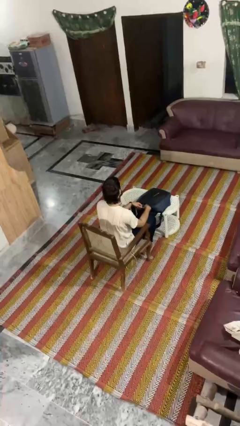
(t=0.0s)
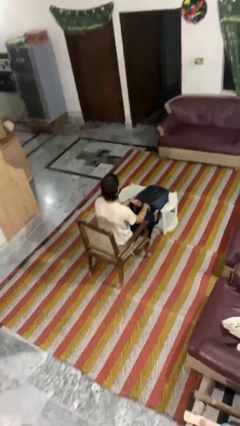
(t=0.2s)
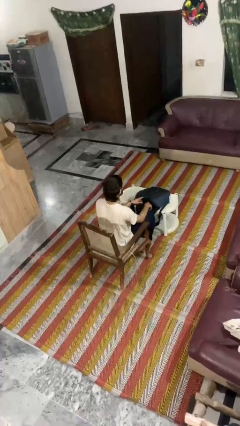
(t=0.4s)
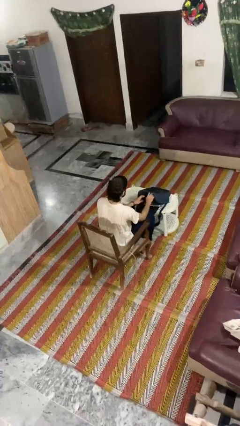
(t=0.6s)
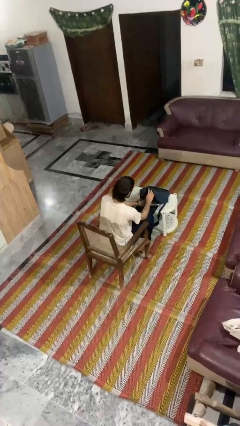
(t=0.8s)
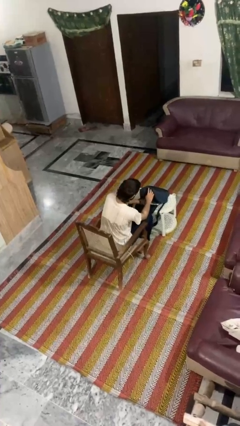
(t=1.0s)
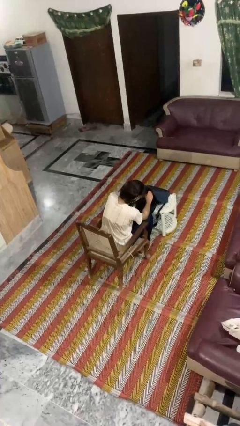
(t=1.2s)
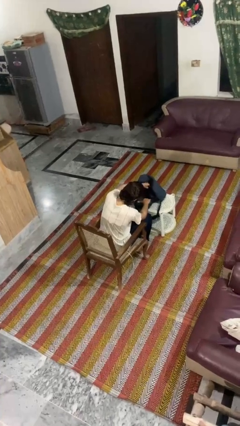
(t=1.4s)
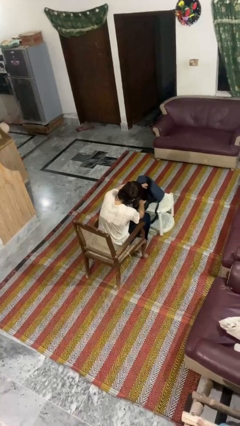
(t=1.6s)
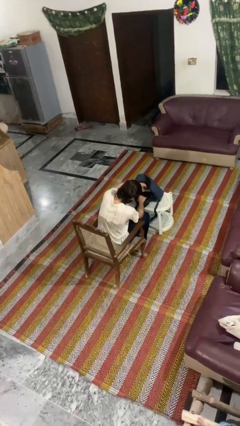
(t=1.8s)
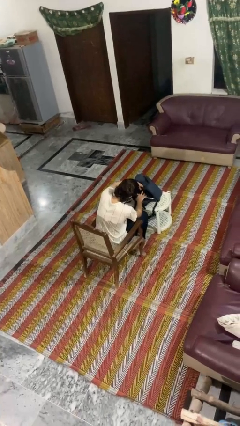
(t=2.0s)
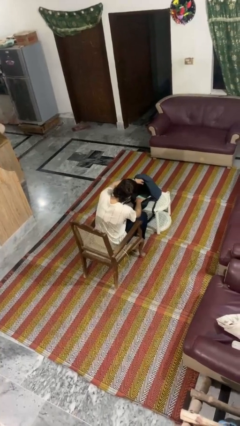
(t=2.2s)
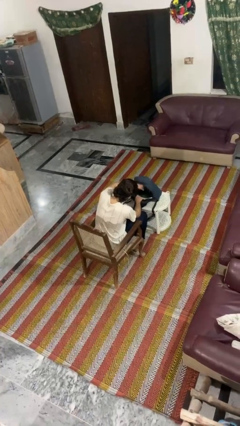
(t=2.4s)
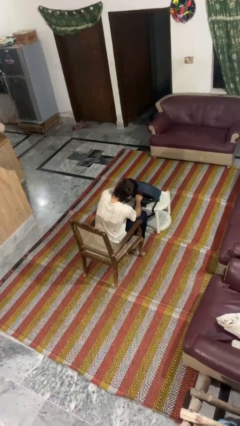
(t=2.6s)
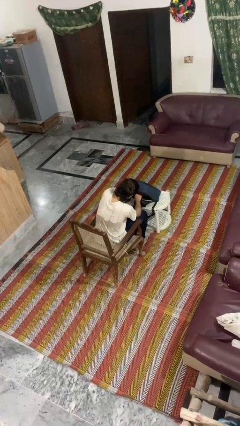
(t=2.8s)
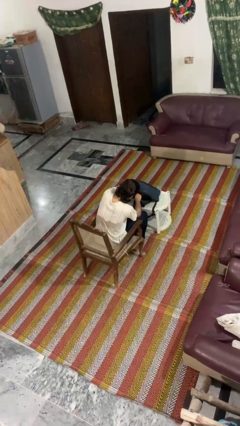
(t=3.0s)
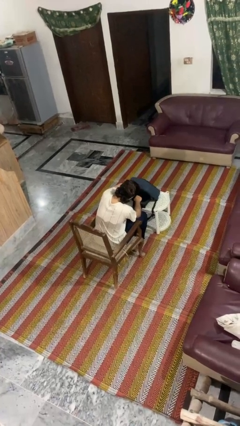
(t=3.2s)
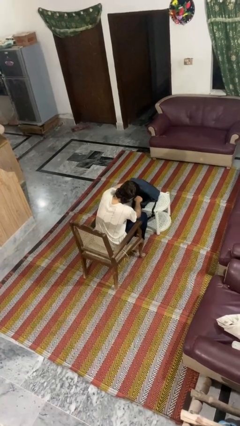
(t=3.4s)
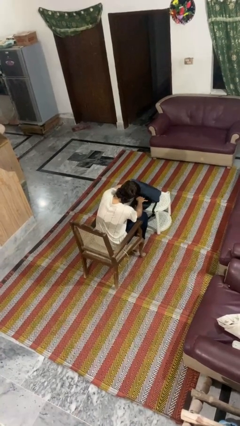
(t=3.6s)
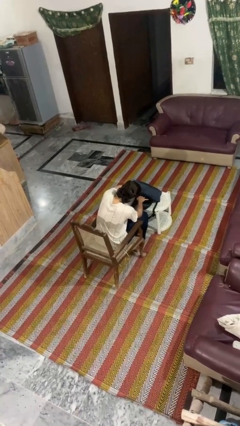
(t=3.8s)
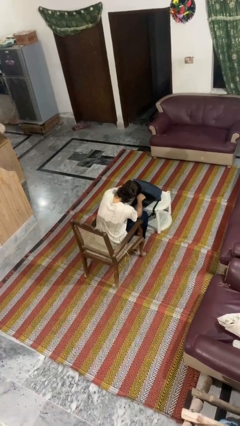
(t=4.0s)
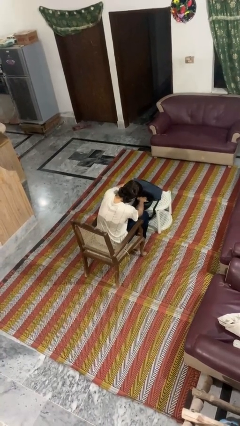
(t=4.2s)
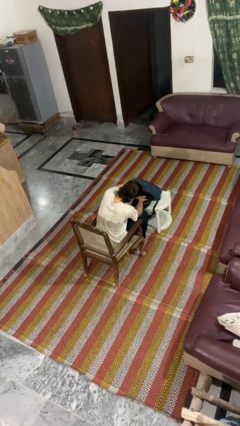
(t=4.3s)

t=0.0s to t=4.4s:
person searches in backpack

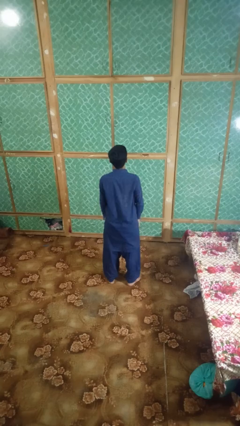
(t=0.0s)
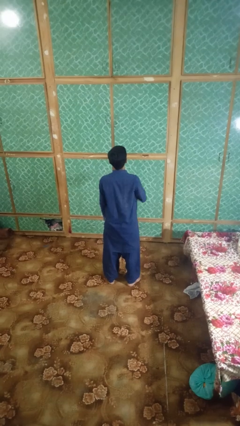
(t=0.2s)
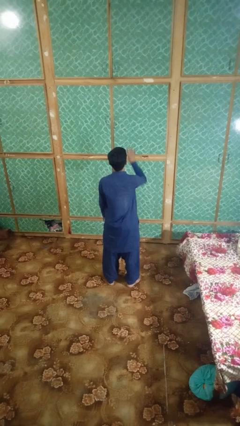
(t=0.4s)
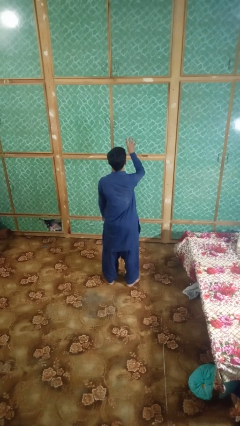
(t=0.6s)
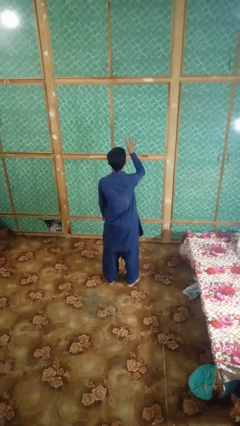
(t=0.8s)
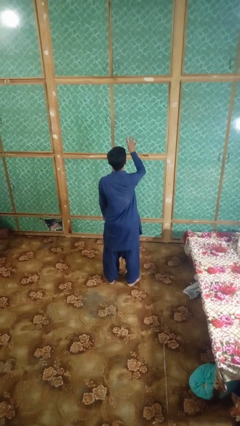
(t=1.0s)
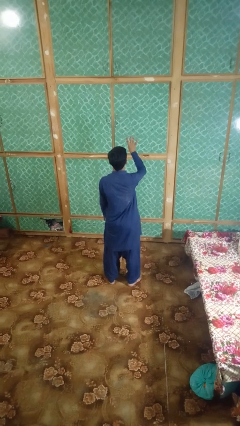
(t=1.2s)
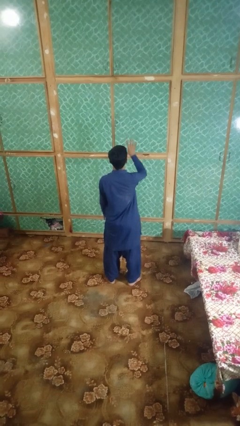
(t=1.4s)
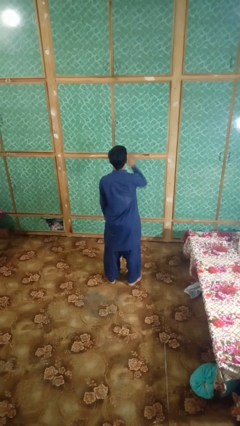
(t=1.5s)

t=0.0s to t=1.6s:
person gestures number four

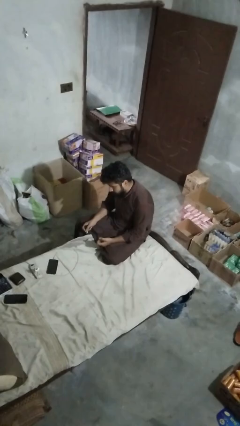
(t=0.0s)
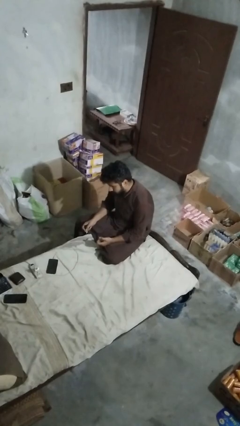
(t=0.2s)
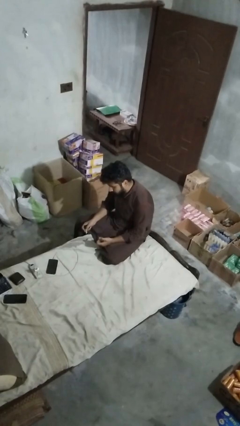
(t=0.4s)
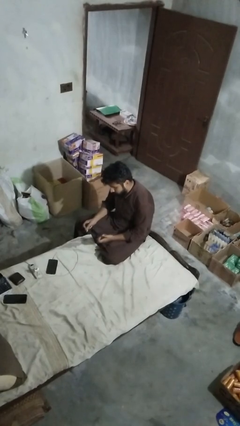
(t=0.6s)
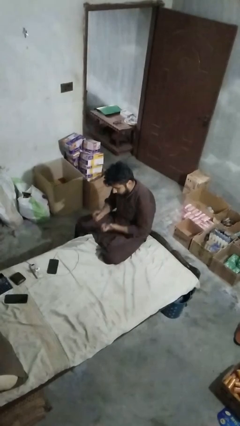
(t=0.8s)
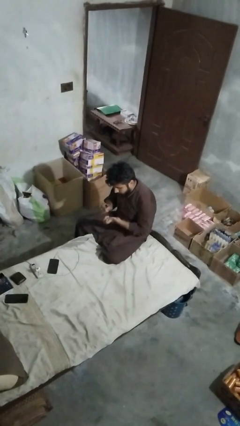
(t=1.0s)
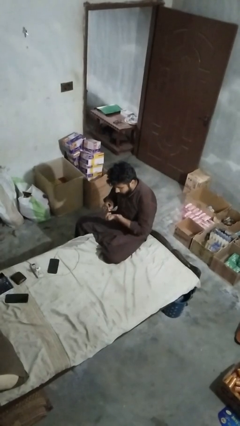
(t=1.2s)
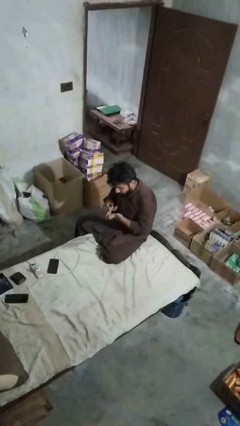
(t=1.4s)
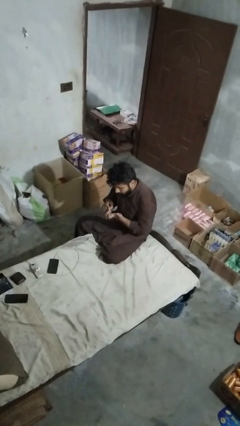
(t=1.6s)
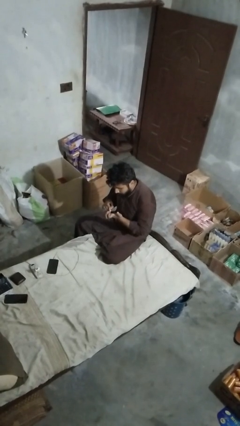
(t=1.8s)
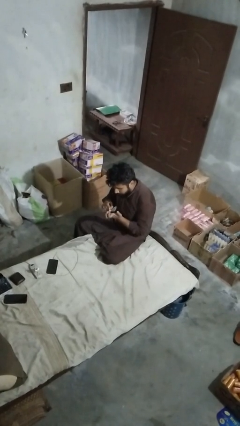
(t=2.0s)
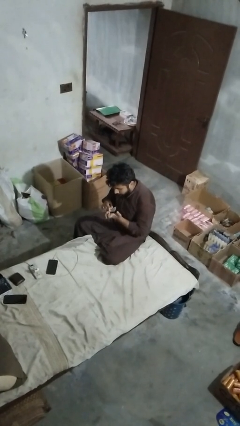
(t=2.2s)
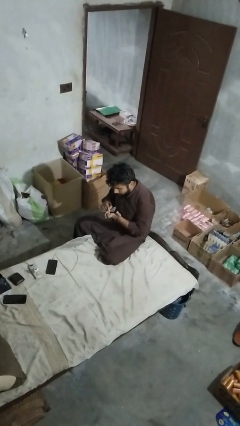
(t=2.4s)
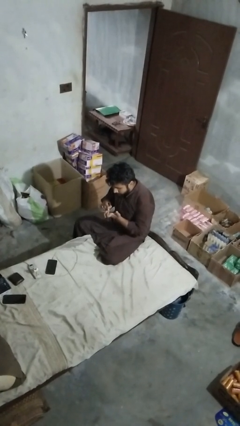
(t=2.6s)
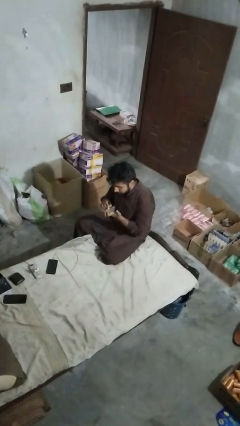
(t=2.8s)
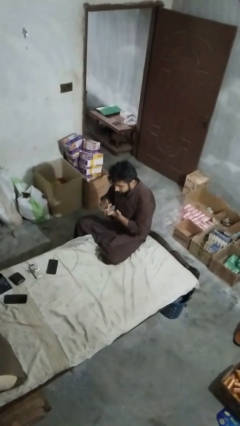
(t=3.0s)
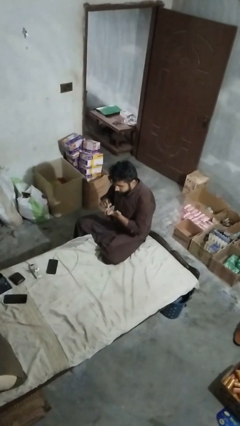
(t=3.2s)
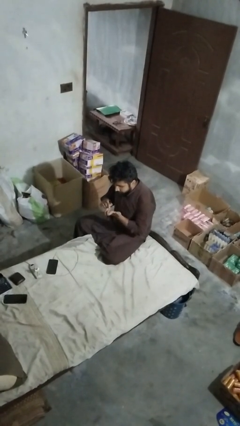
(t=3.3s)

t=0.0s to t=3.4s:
person paints fingernails

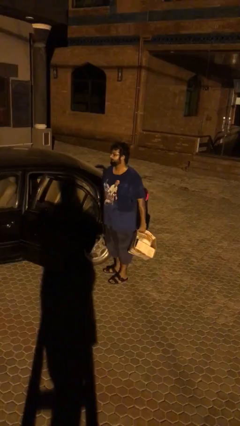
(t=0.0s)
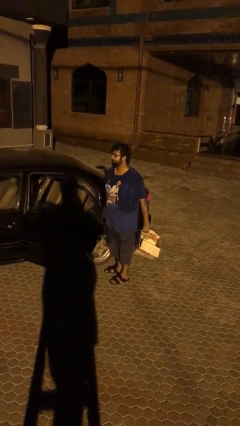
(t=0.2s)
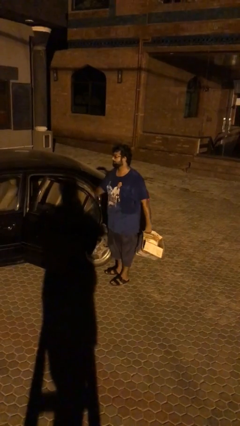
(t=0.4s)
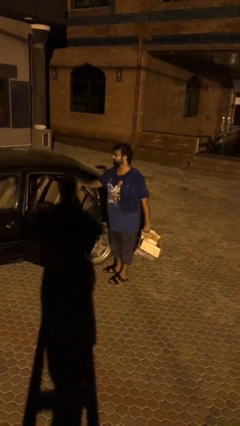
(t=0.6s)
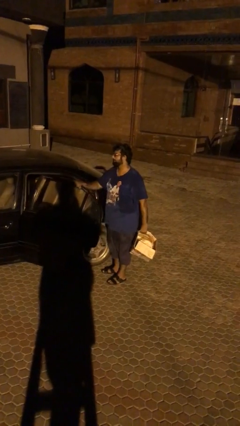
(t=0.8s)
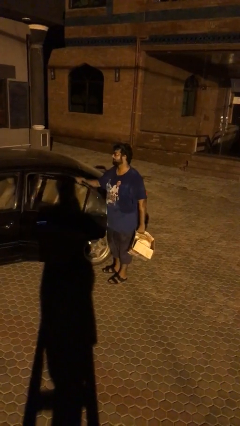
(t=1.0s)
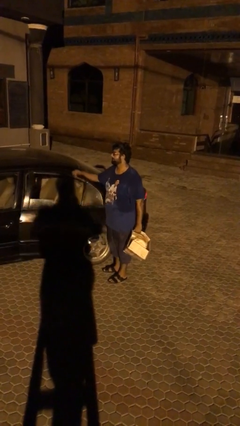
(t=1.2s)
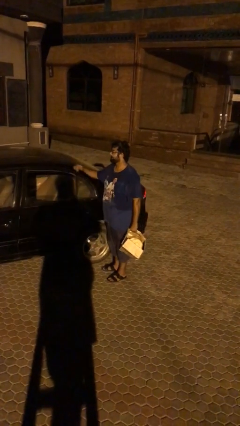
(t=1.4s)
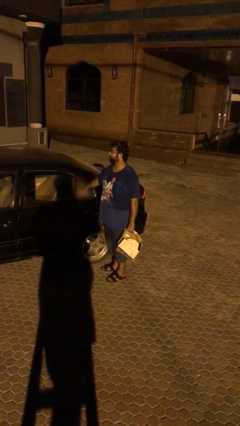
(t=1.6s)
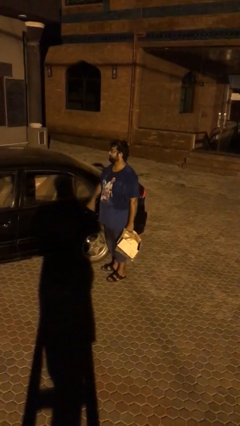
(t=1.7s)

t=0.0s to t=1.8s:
person closes car door

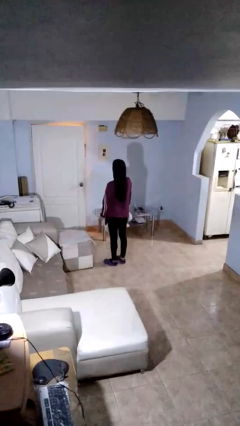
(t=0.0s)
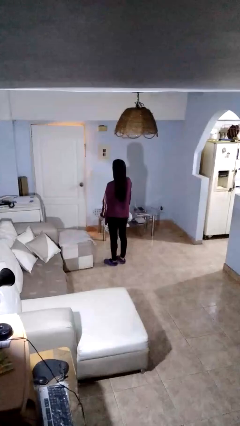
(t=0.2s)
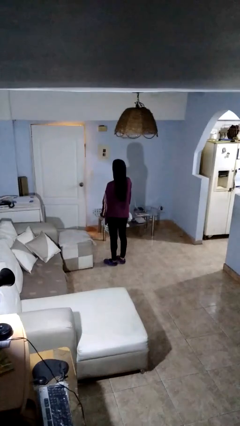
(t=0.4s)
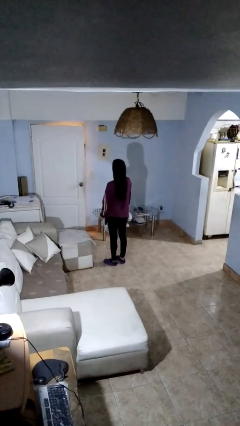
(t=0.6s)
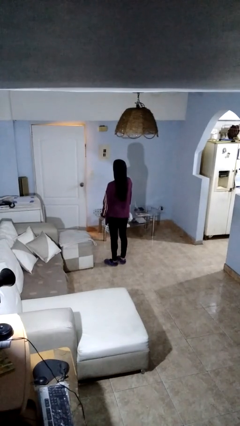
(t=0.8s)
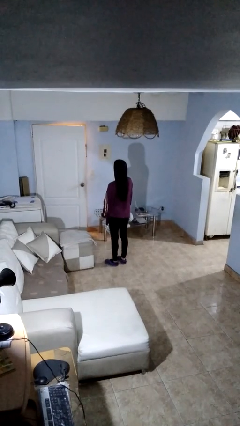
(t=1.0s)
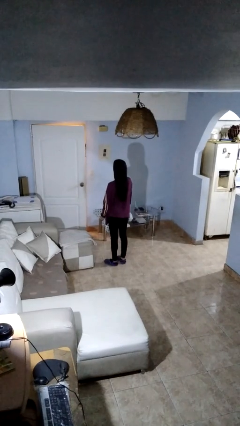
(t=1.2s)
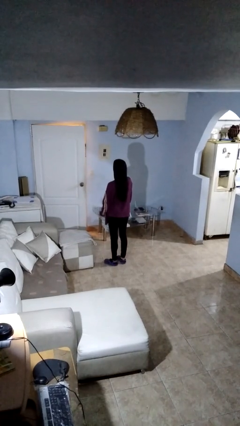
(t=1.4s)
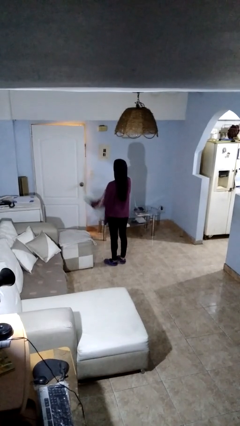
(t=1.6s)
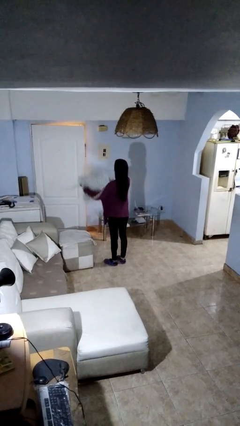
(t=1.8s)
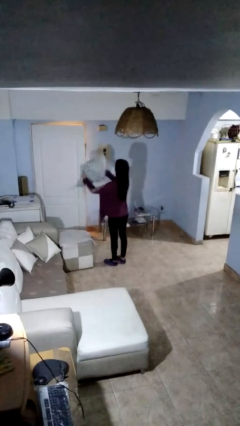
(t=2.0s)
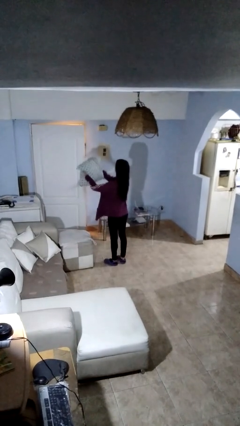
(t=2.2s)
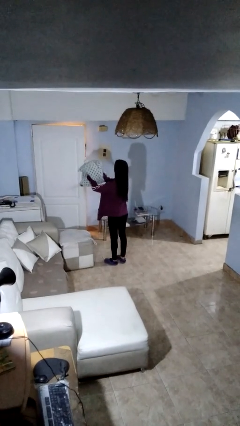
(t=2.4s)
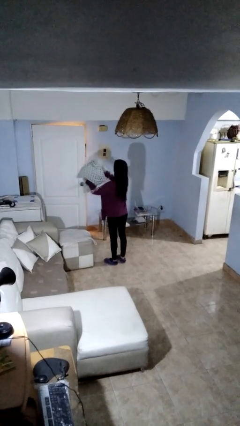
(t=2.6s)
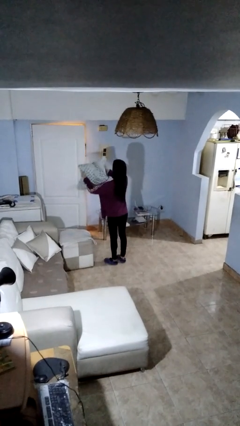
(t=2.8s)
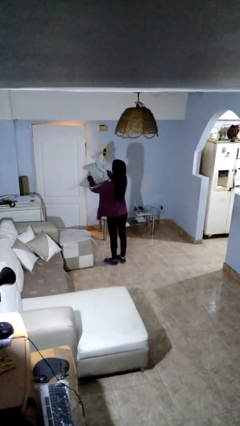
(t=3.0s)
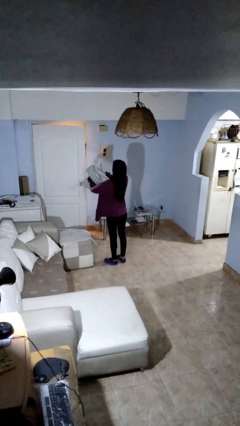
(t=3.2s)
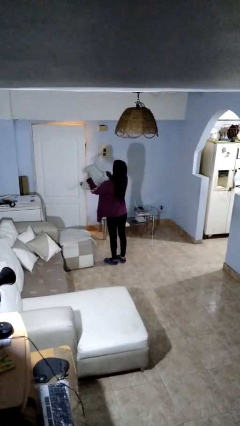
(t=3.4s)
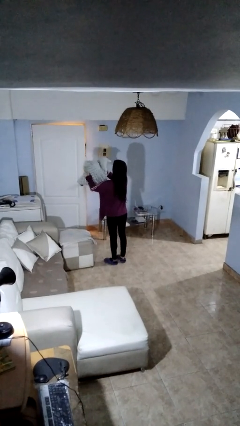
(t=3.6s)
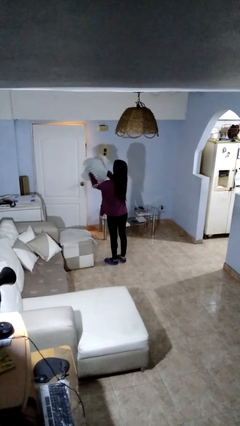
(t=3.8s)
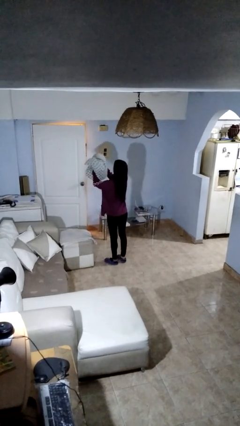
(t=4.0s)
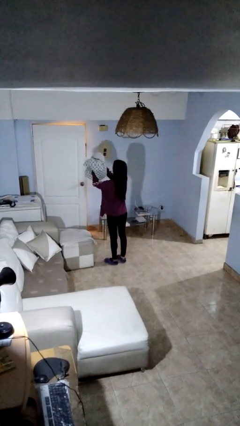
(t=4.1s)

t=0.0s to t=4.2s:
person squeezes object

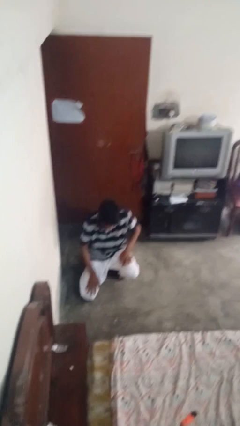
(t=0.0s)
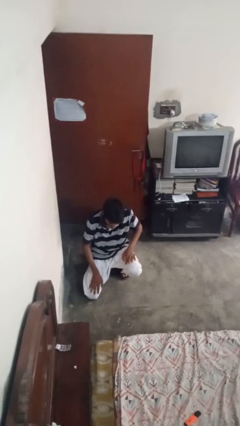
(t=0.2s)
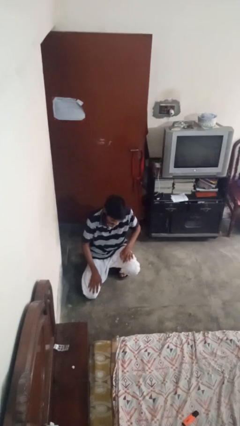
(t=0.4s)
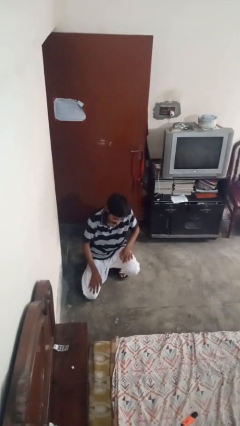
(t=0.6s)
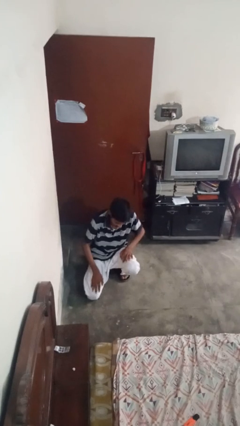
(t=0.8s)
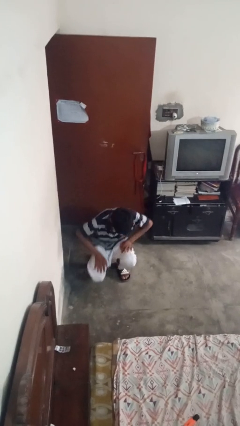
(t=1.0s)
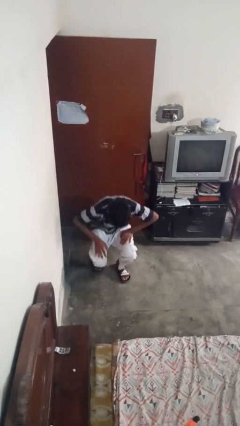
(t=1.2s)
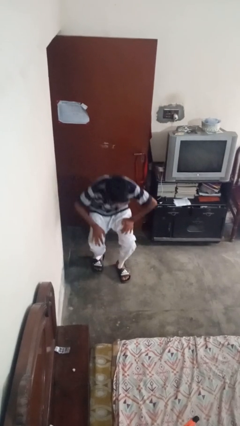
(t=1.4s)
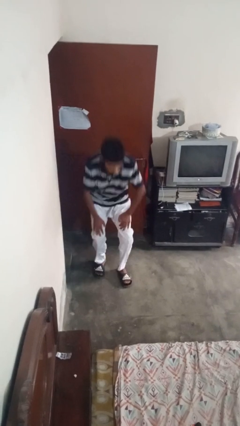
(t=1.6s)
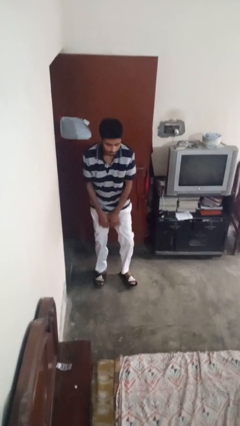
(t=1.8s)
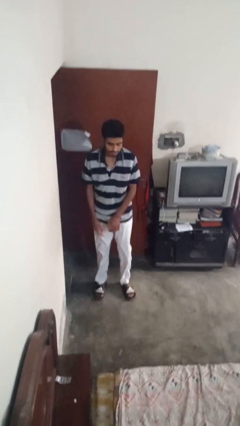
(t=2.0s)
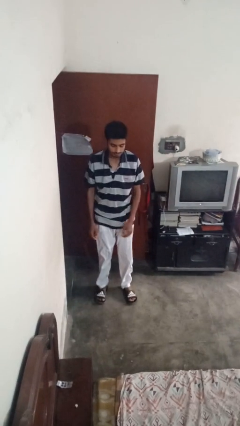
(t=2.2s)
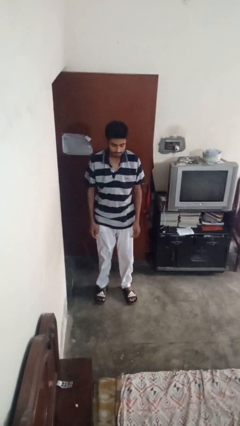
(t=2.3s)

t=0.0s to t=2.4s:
person stands up from floor
